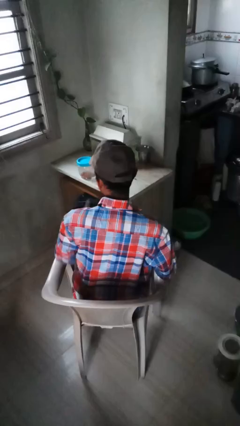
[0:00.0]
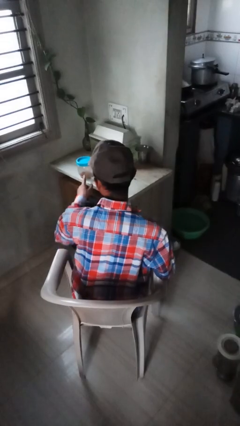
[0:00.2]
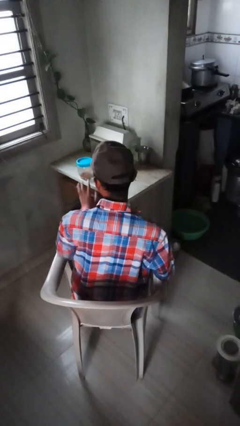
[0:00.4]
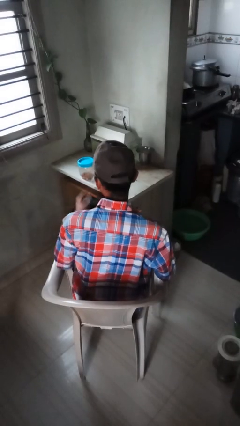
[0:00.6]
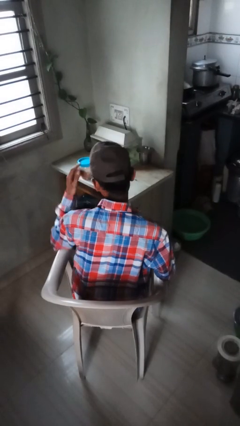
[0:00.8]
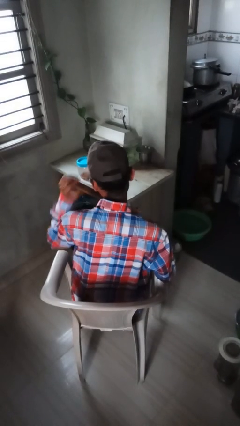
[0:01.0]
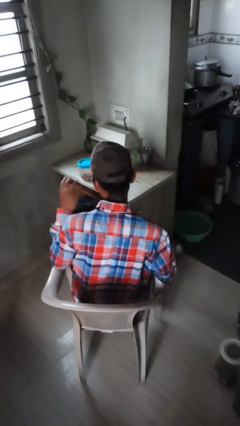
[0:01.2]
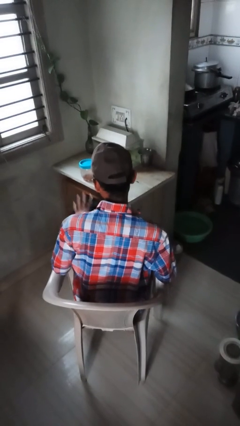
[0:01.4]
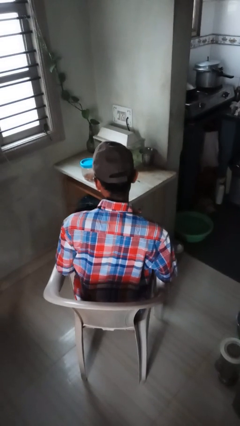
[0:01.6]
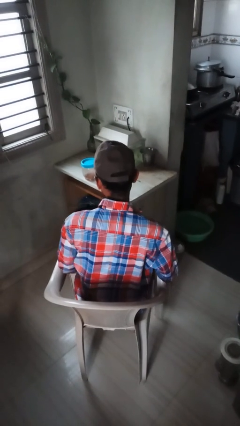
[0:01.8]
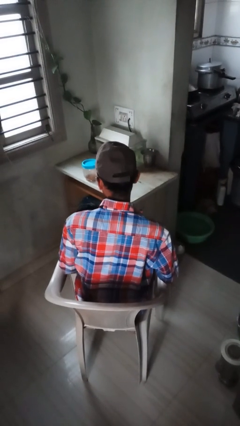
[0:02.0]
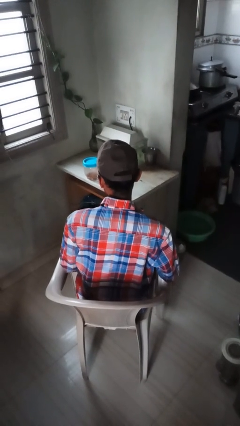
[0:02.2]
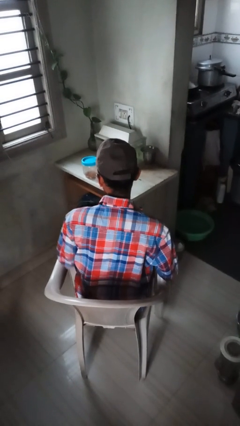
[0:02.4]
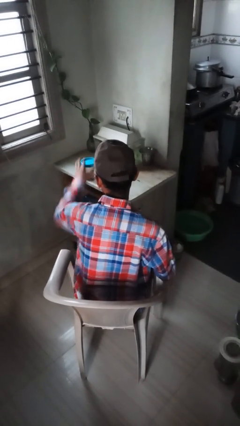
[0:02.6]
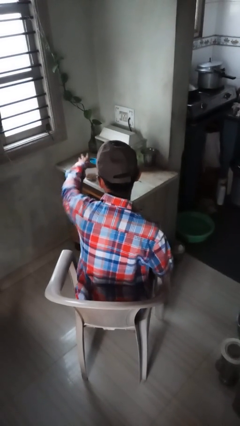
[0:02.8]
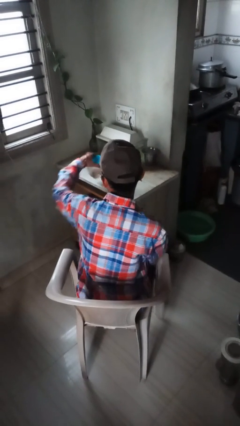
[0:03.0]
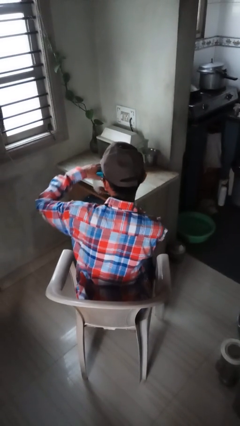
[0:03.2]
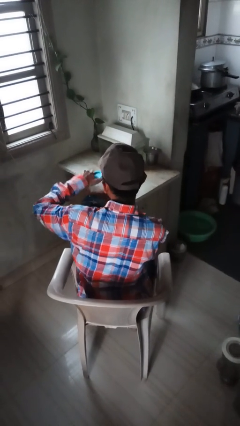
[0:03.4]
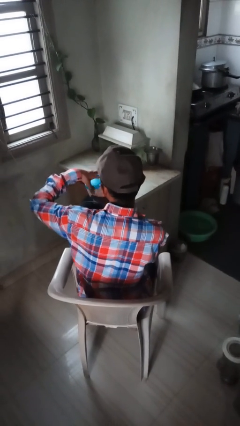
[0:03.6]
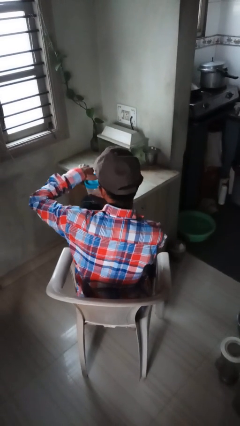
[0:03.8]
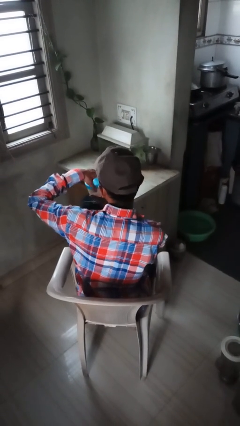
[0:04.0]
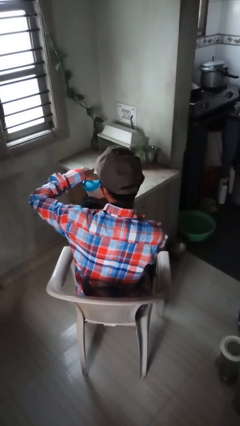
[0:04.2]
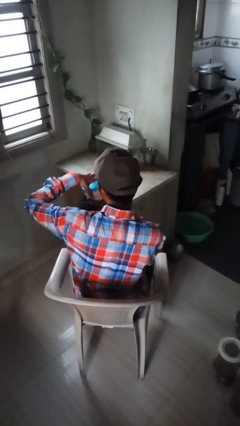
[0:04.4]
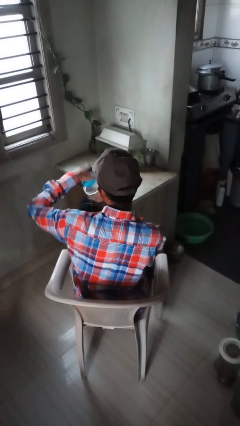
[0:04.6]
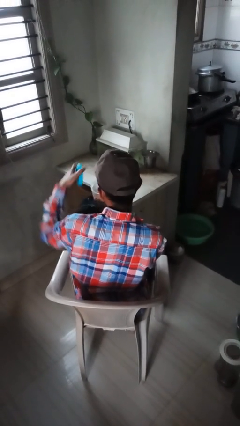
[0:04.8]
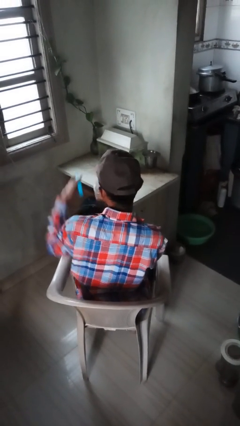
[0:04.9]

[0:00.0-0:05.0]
person opens jar

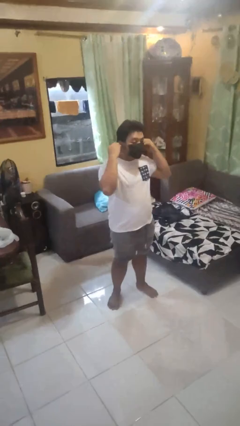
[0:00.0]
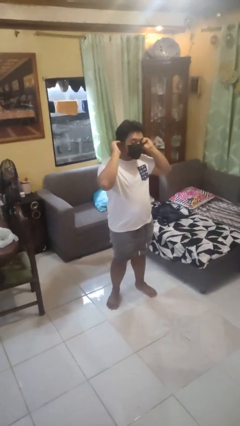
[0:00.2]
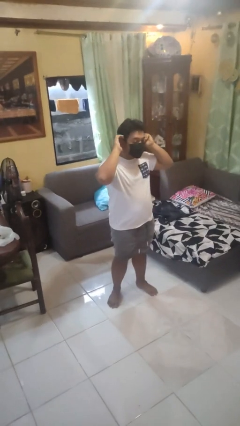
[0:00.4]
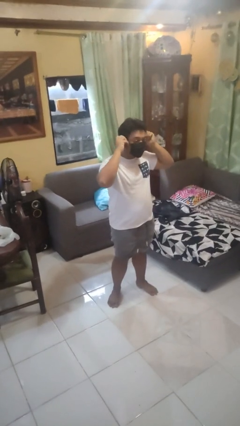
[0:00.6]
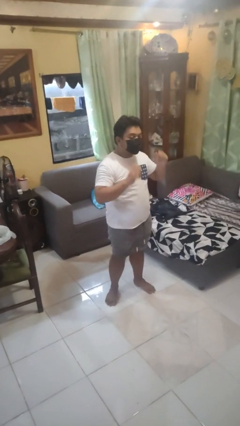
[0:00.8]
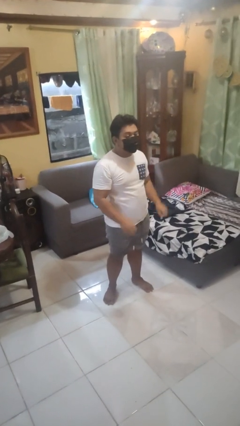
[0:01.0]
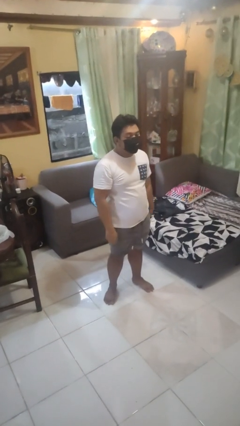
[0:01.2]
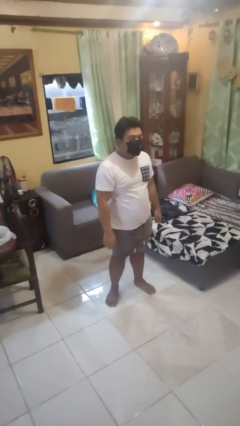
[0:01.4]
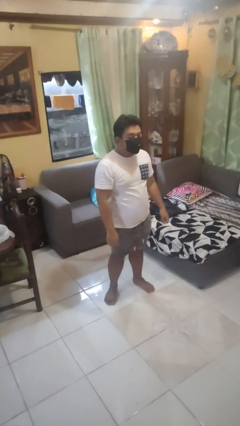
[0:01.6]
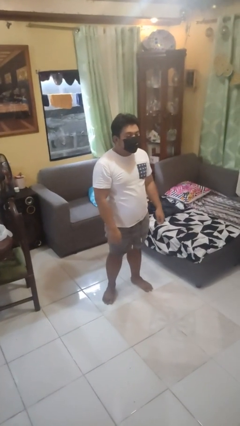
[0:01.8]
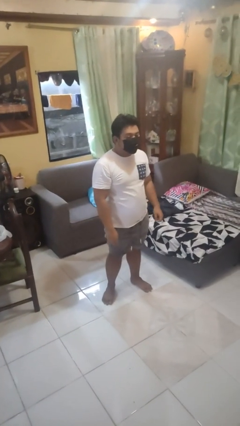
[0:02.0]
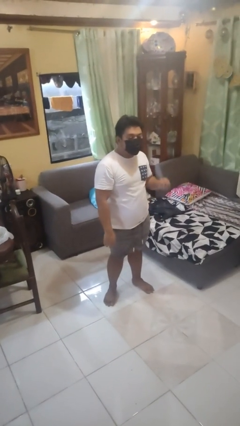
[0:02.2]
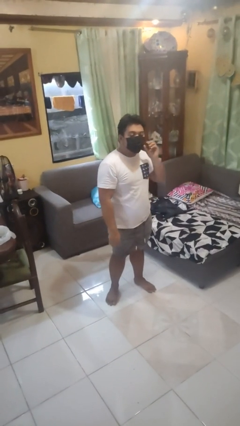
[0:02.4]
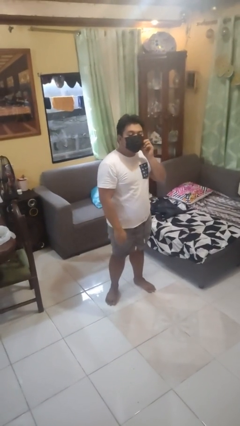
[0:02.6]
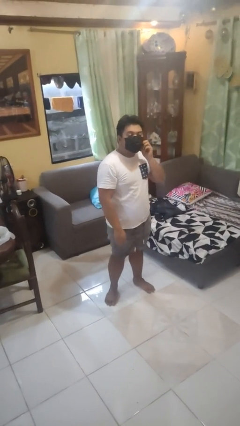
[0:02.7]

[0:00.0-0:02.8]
person puts on facemask

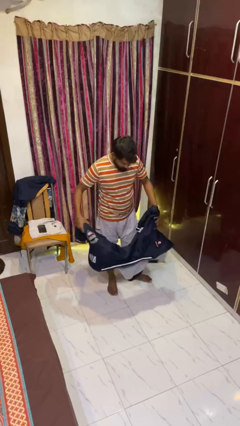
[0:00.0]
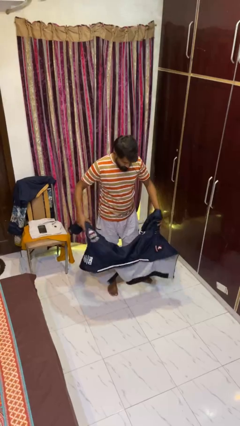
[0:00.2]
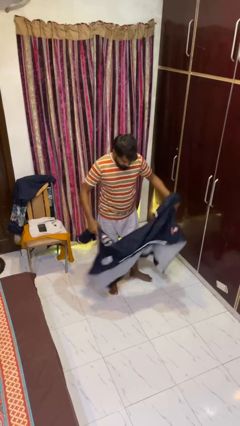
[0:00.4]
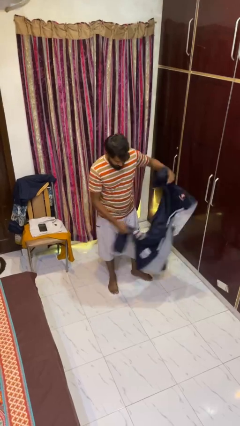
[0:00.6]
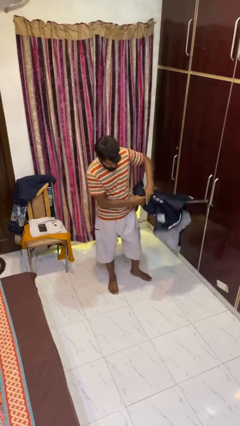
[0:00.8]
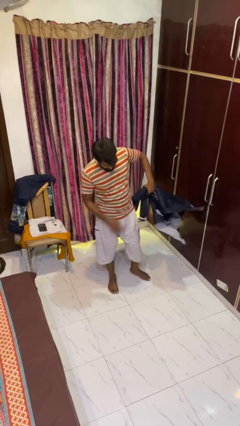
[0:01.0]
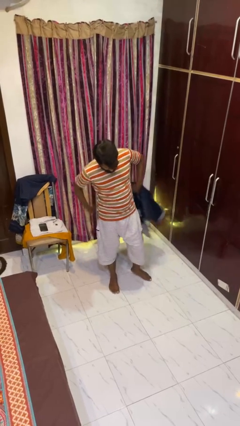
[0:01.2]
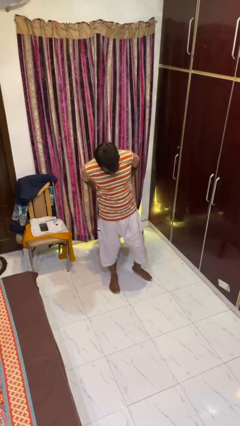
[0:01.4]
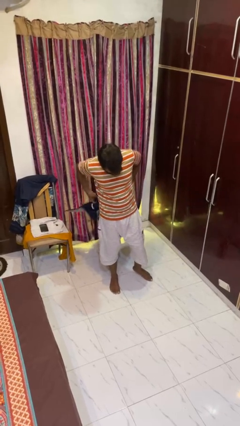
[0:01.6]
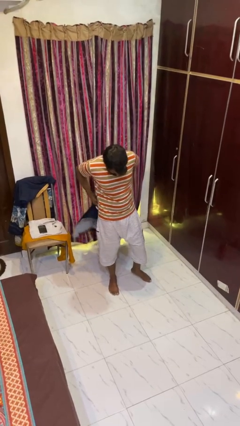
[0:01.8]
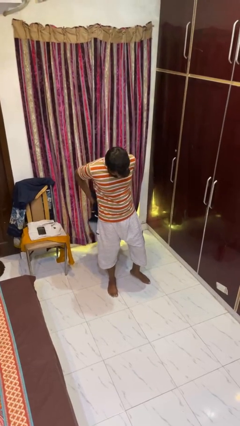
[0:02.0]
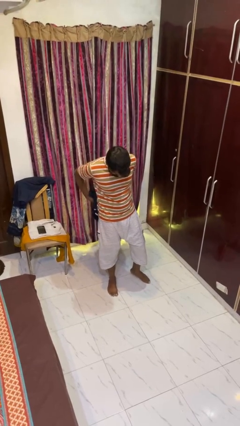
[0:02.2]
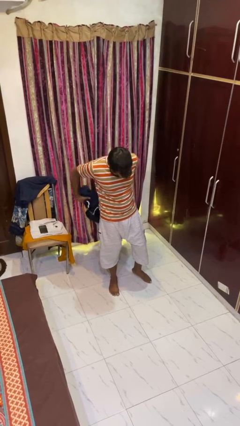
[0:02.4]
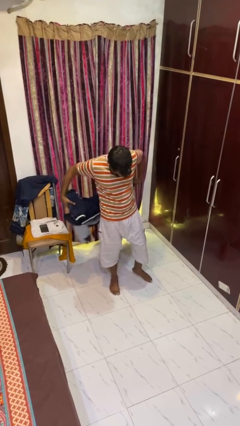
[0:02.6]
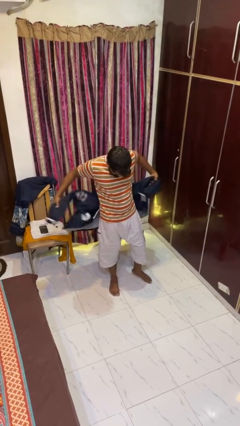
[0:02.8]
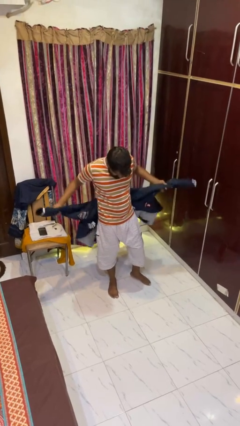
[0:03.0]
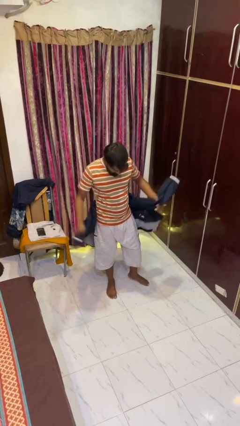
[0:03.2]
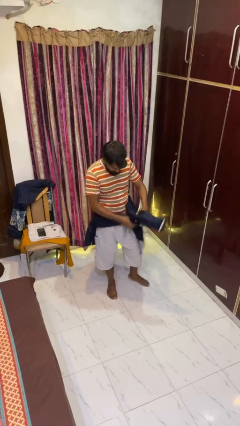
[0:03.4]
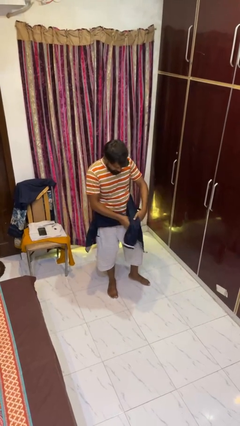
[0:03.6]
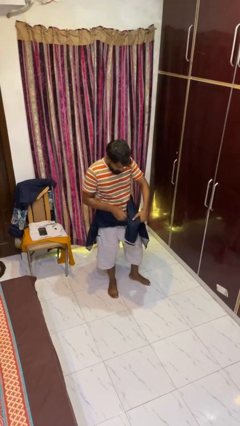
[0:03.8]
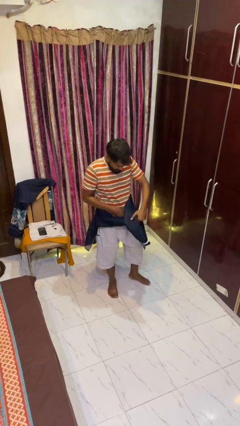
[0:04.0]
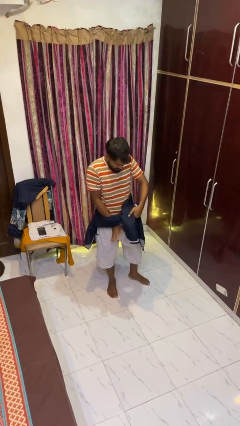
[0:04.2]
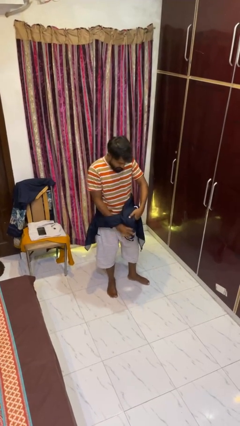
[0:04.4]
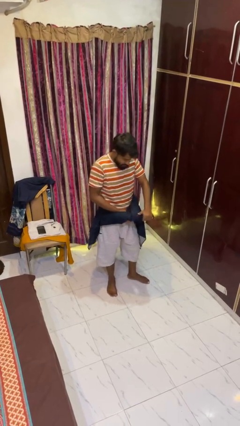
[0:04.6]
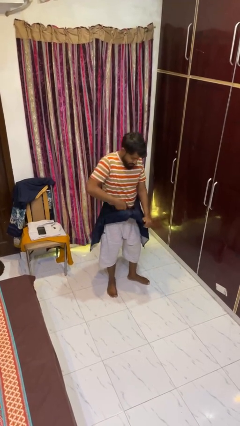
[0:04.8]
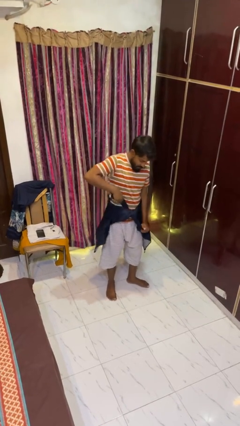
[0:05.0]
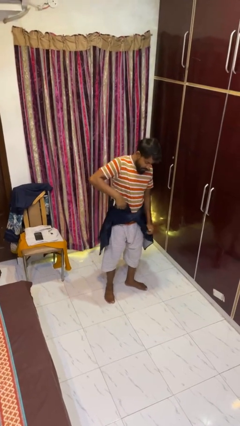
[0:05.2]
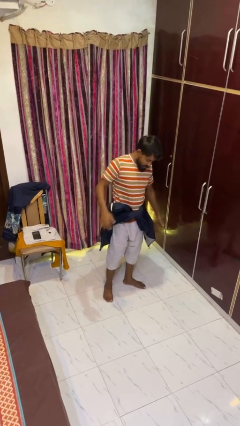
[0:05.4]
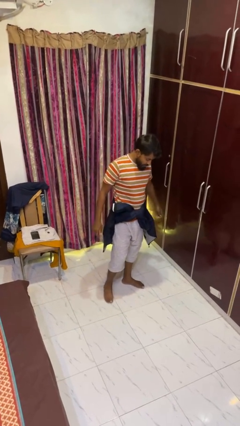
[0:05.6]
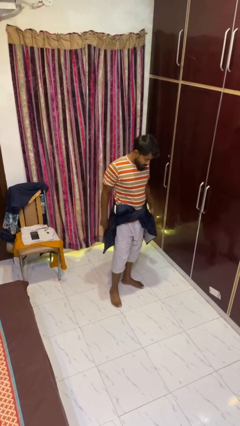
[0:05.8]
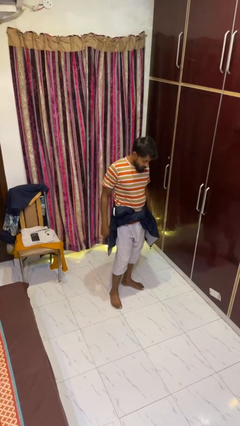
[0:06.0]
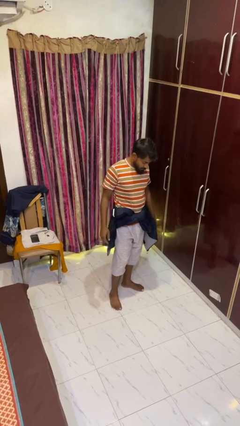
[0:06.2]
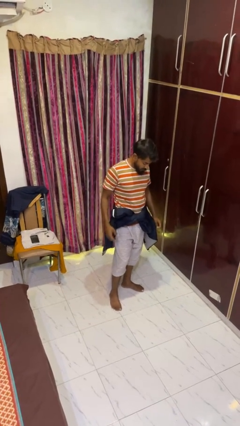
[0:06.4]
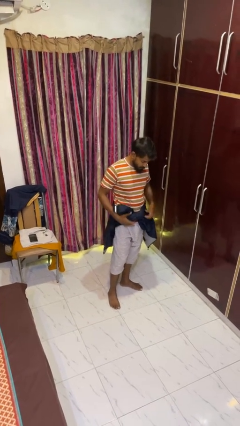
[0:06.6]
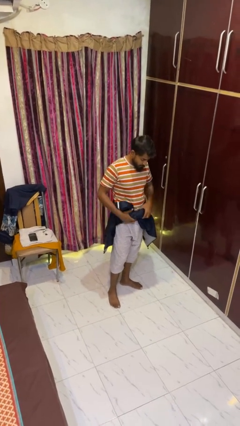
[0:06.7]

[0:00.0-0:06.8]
person ties jacket around waist

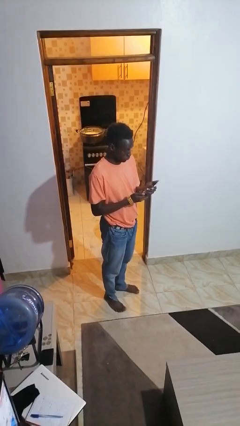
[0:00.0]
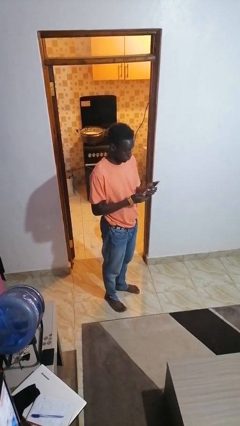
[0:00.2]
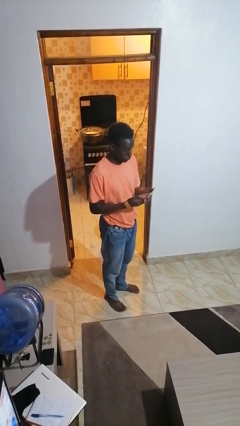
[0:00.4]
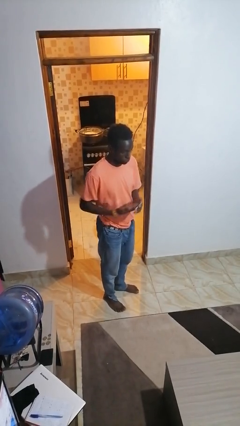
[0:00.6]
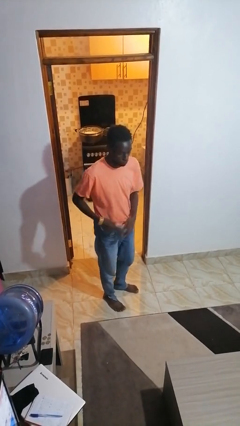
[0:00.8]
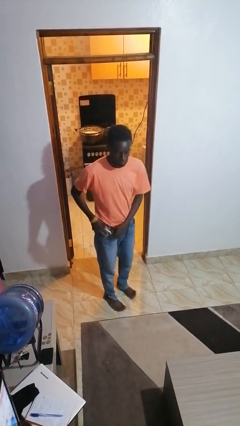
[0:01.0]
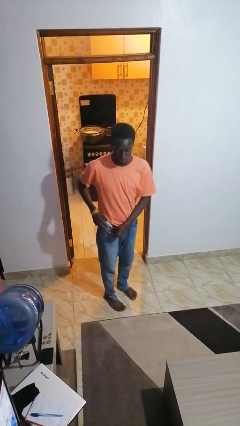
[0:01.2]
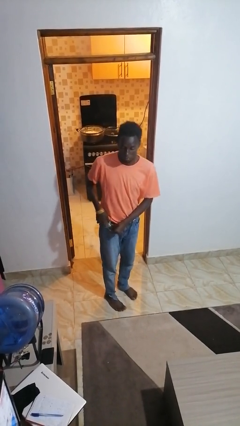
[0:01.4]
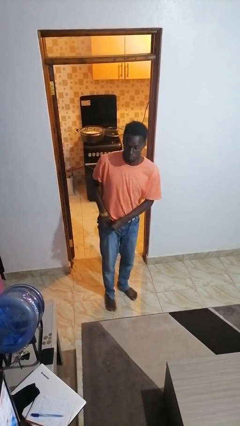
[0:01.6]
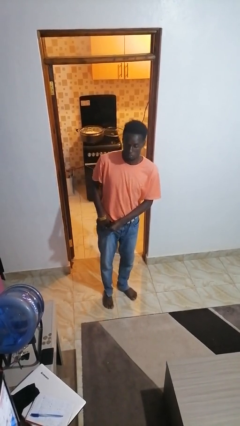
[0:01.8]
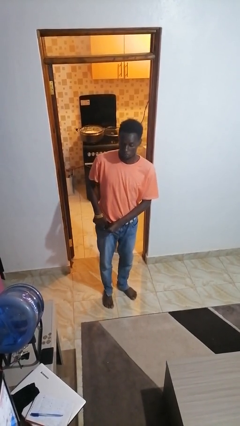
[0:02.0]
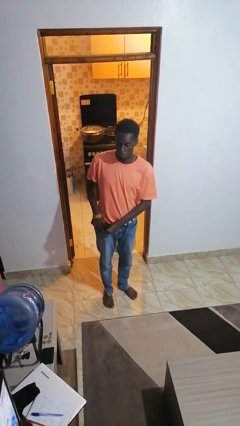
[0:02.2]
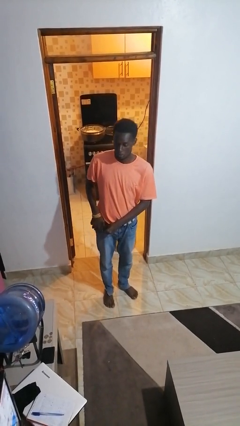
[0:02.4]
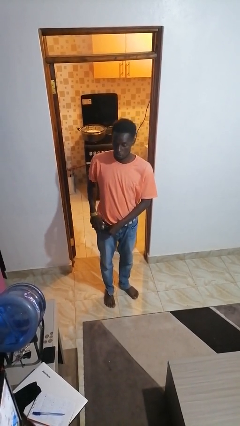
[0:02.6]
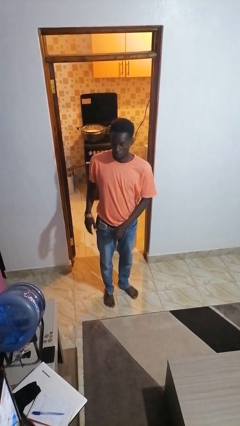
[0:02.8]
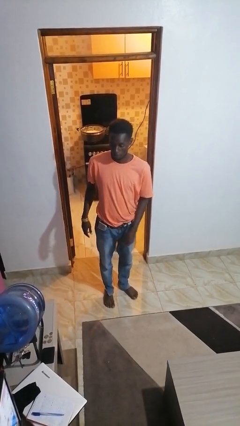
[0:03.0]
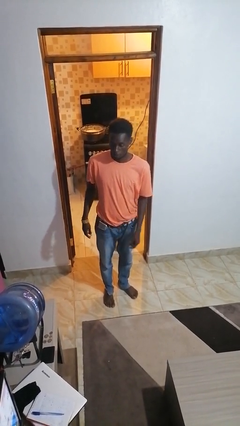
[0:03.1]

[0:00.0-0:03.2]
person puts phone into pocket

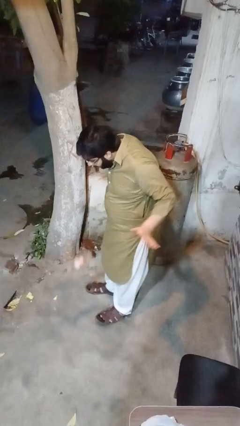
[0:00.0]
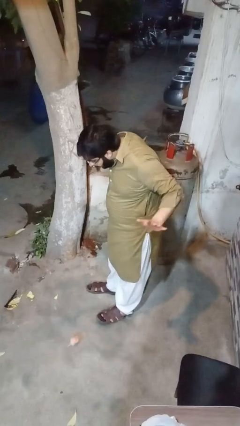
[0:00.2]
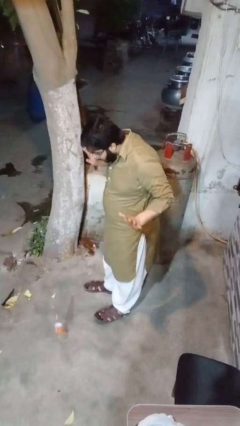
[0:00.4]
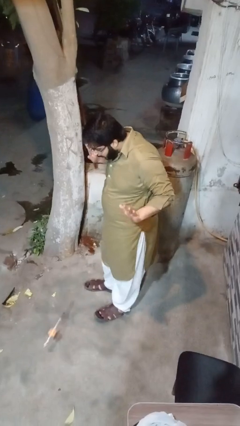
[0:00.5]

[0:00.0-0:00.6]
person drops object
